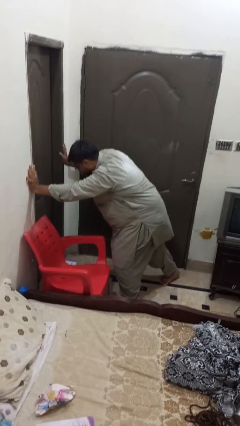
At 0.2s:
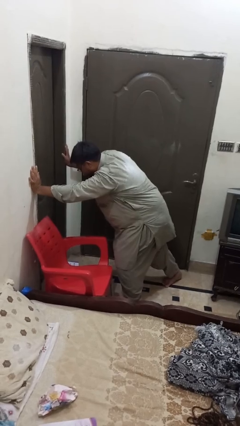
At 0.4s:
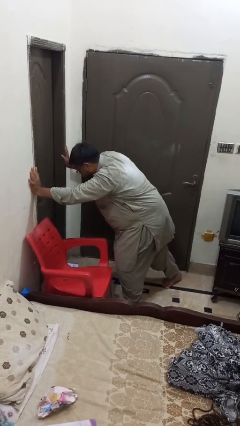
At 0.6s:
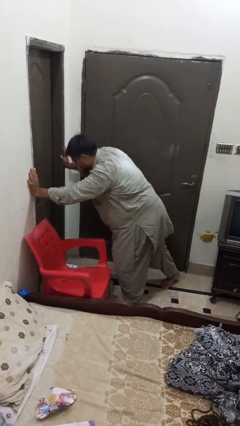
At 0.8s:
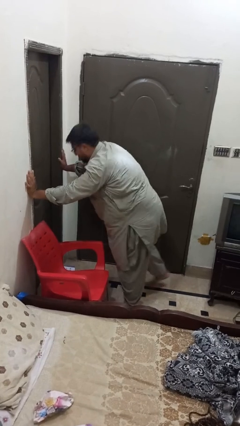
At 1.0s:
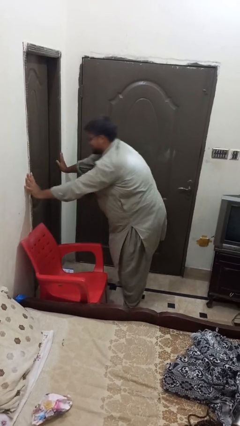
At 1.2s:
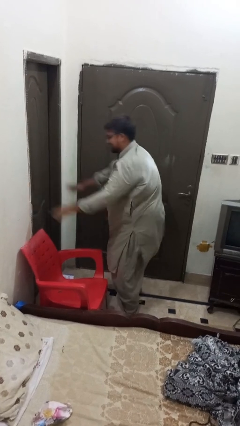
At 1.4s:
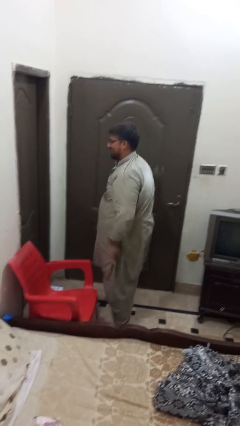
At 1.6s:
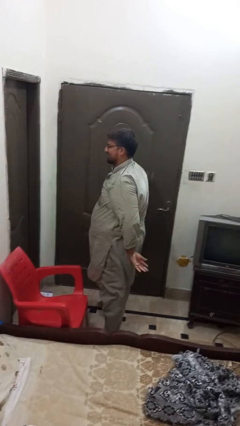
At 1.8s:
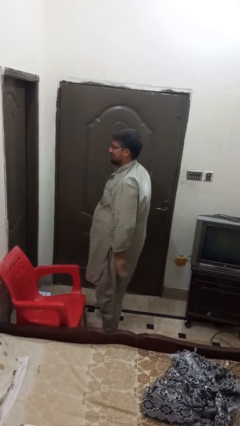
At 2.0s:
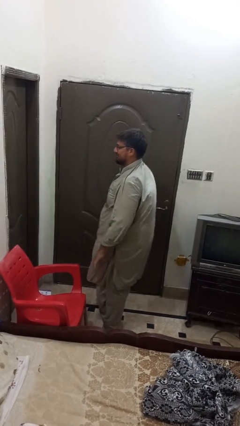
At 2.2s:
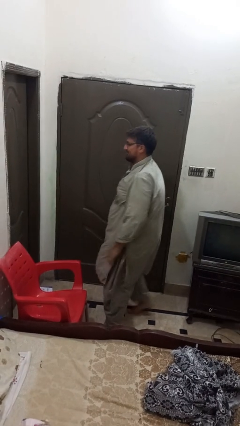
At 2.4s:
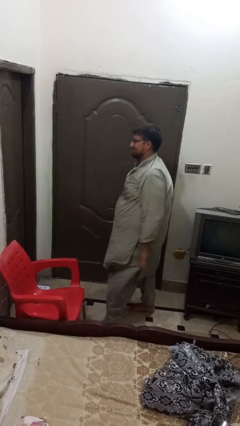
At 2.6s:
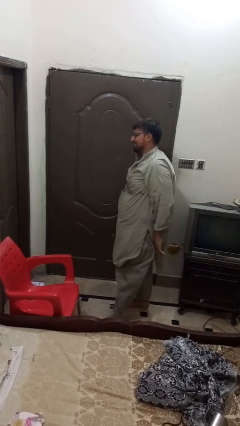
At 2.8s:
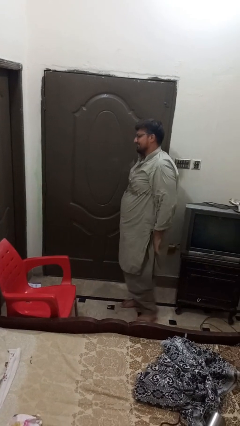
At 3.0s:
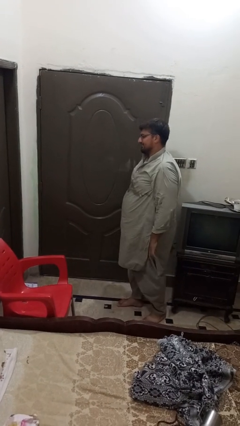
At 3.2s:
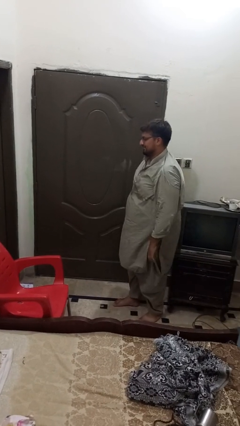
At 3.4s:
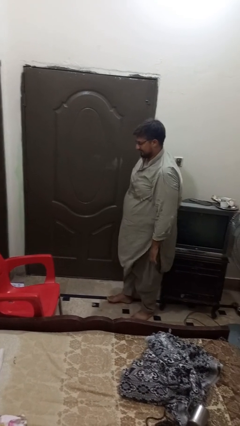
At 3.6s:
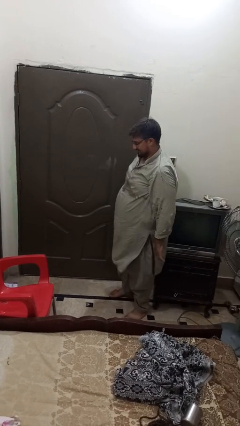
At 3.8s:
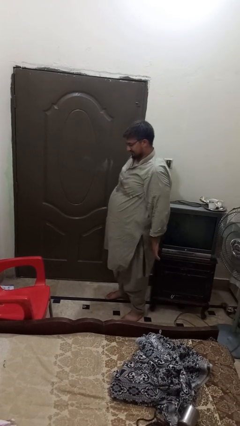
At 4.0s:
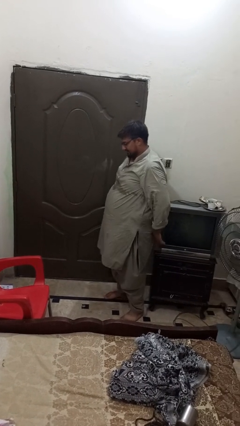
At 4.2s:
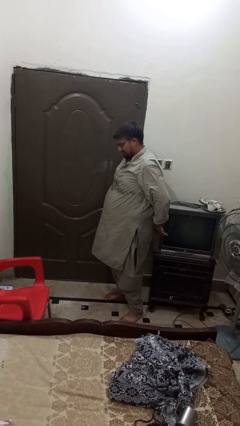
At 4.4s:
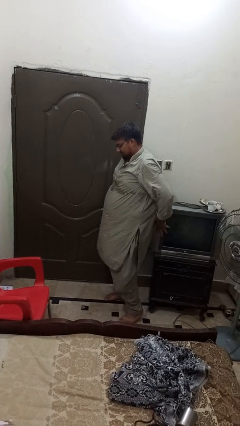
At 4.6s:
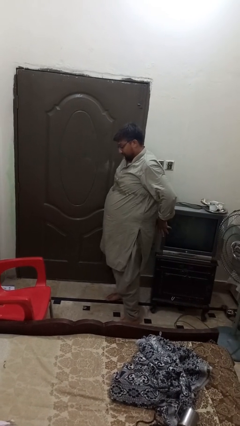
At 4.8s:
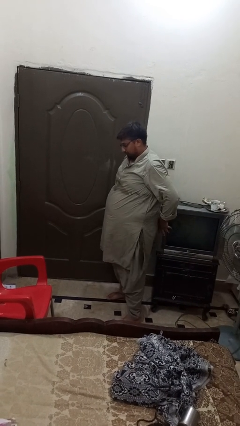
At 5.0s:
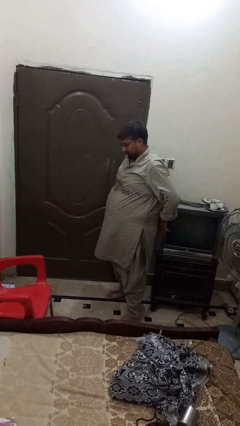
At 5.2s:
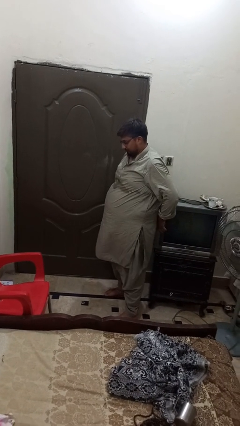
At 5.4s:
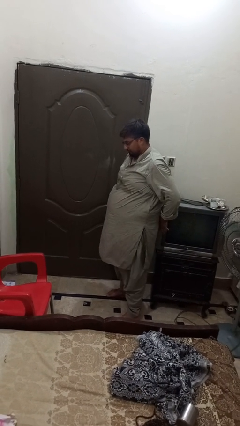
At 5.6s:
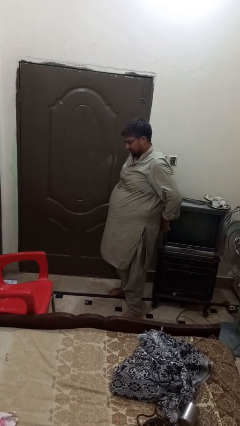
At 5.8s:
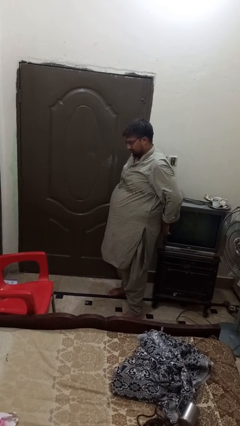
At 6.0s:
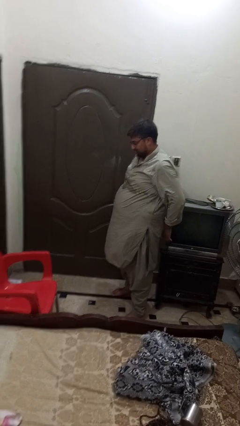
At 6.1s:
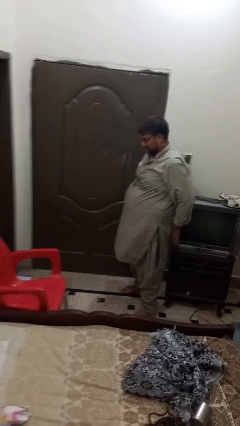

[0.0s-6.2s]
person stands up from floor

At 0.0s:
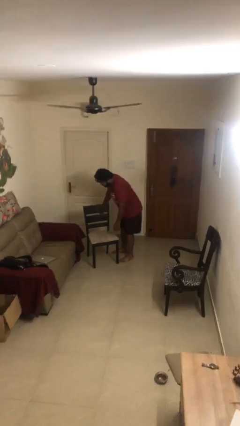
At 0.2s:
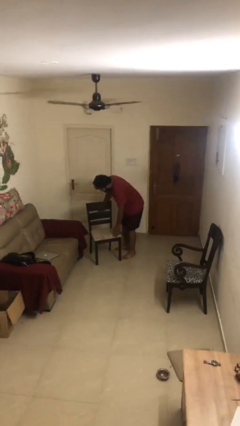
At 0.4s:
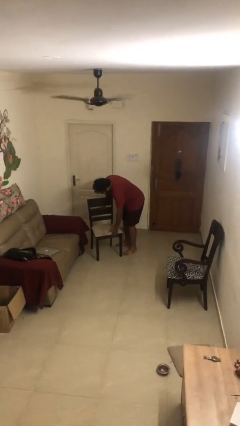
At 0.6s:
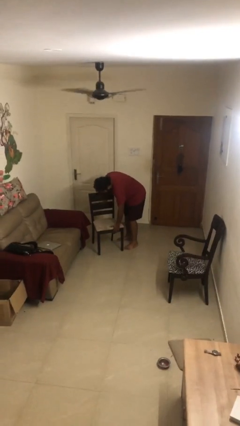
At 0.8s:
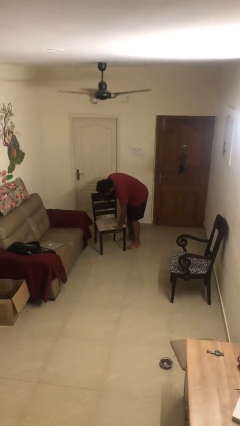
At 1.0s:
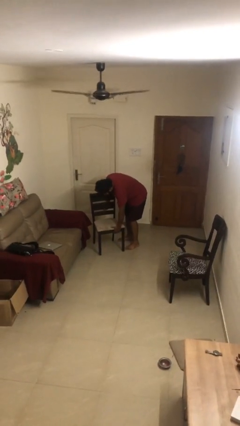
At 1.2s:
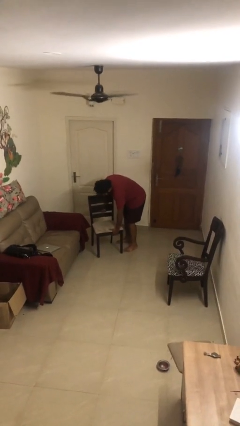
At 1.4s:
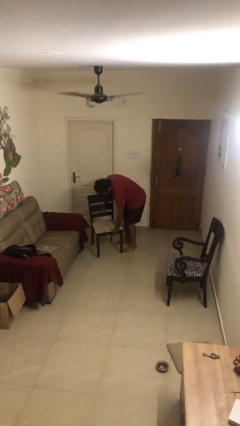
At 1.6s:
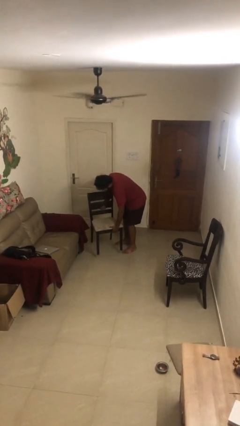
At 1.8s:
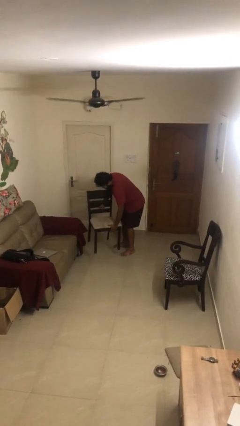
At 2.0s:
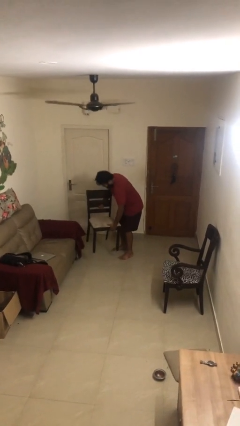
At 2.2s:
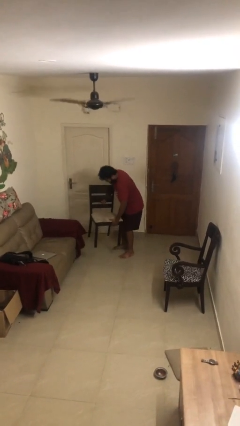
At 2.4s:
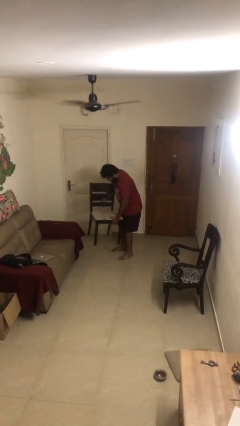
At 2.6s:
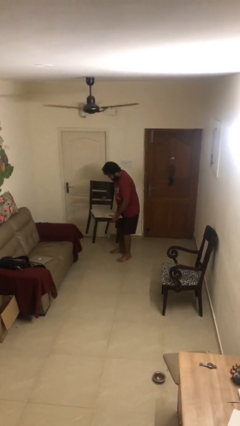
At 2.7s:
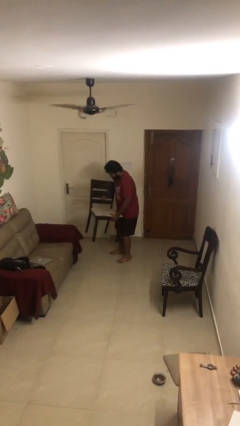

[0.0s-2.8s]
person picks up object from floor

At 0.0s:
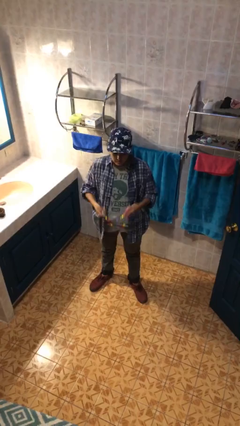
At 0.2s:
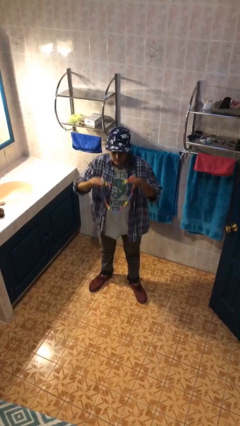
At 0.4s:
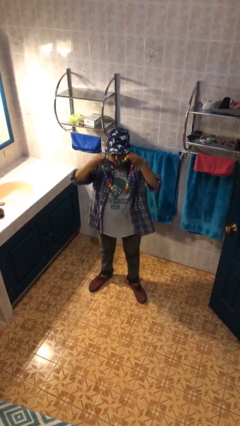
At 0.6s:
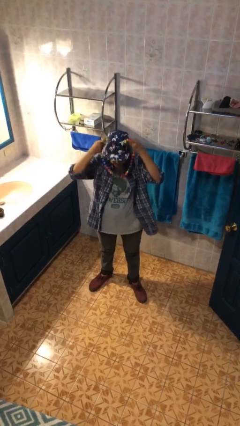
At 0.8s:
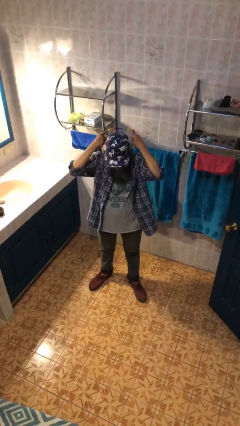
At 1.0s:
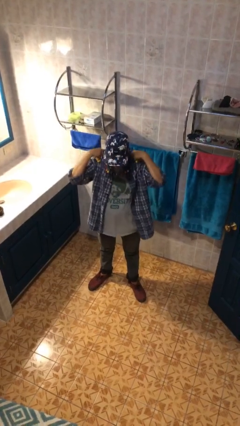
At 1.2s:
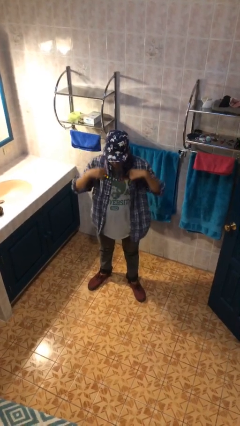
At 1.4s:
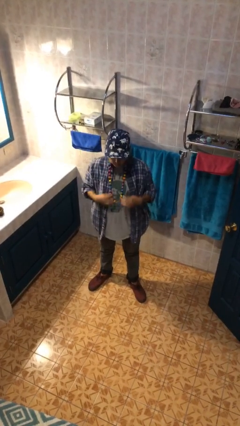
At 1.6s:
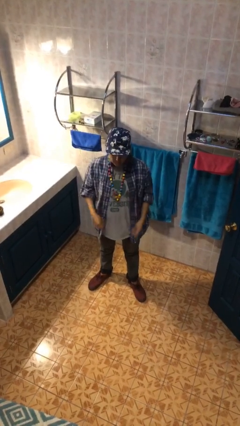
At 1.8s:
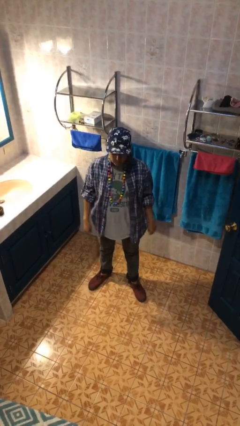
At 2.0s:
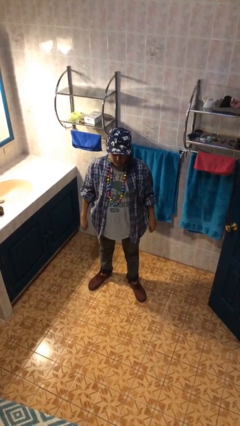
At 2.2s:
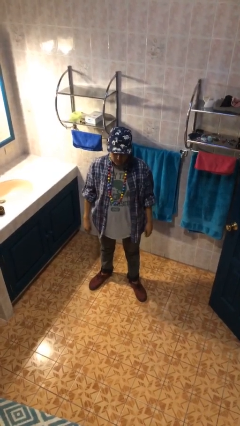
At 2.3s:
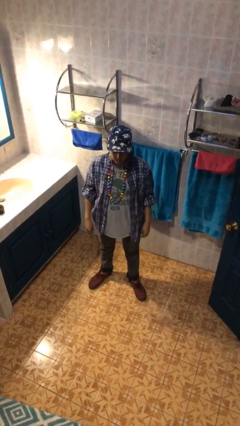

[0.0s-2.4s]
person puts on necklace

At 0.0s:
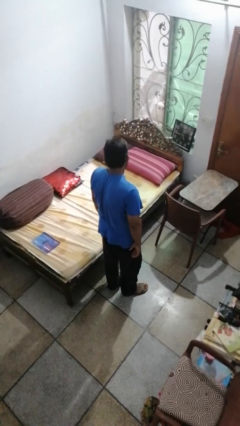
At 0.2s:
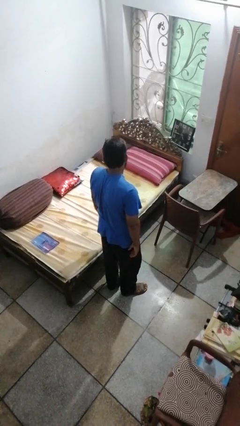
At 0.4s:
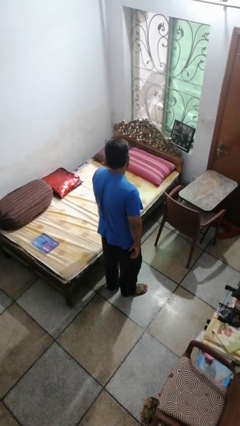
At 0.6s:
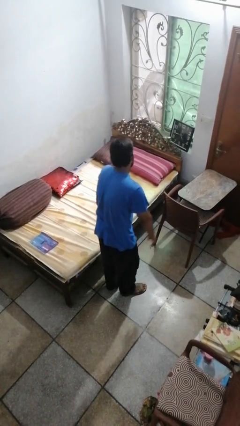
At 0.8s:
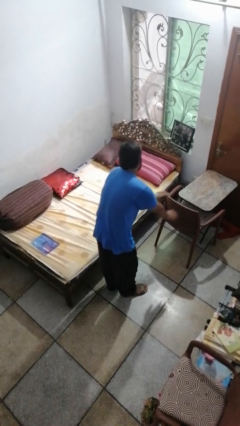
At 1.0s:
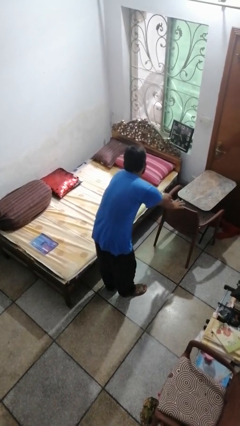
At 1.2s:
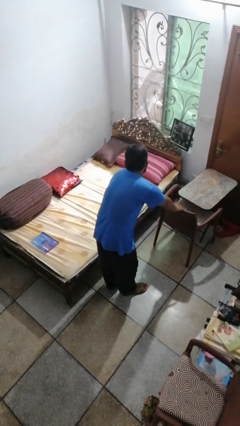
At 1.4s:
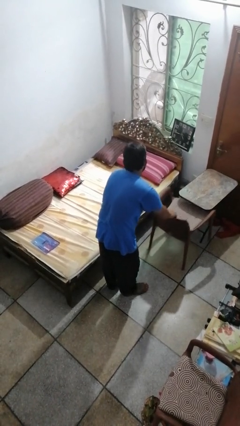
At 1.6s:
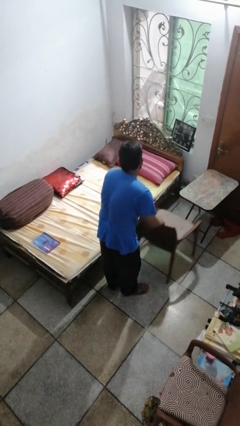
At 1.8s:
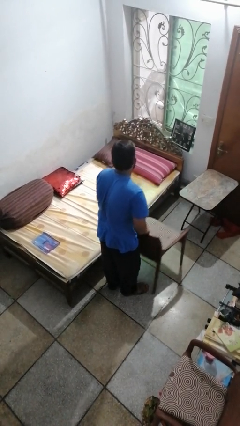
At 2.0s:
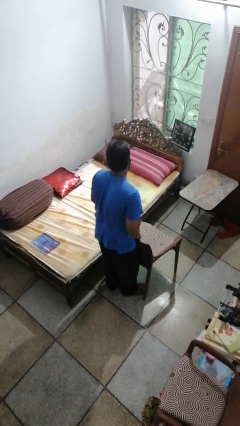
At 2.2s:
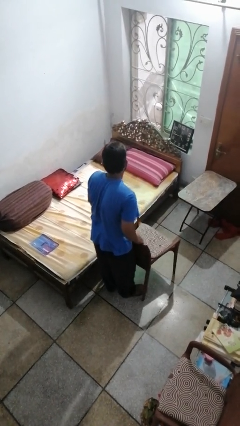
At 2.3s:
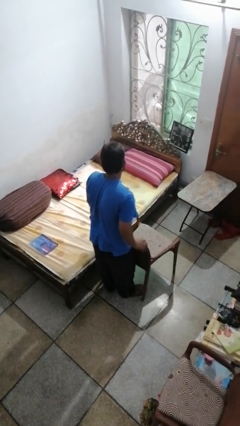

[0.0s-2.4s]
person pulls out chair

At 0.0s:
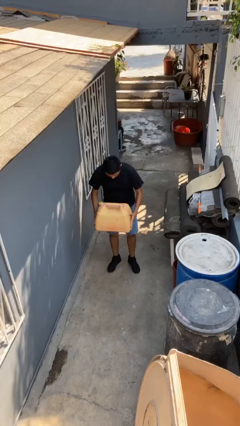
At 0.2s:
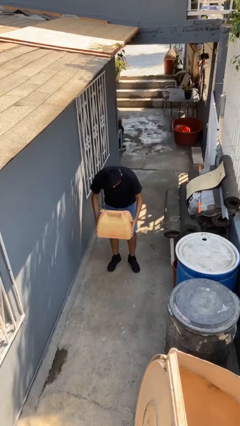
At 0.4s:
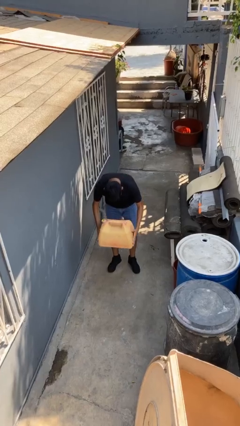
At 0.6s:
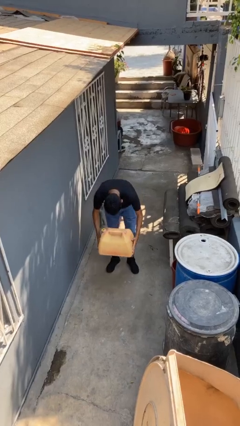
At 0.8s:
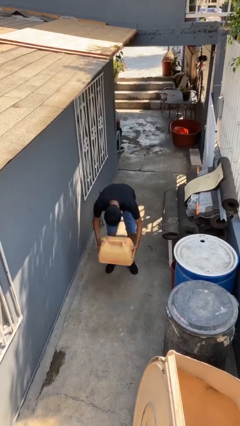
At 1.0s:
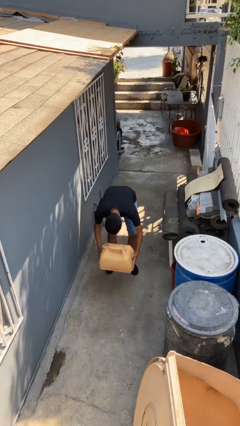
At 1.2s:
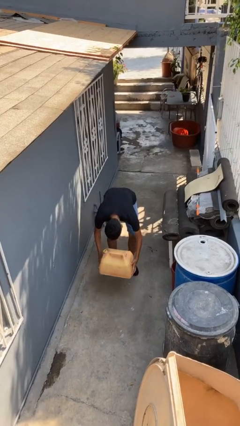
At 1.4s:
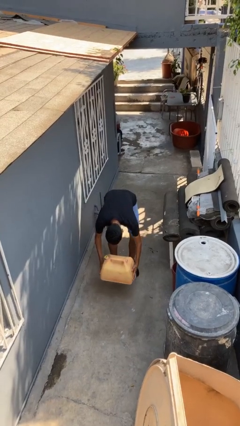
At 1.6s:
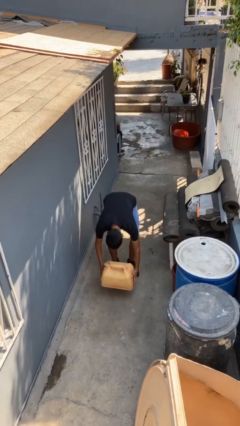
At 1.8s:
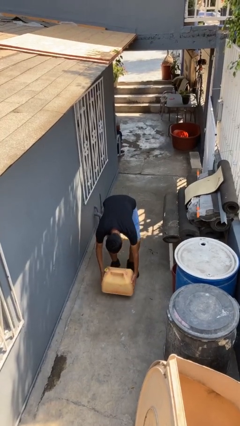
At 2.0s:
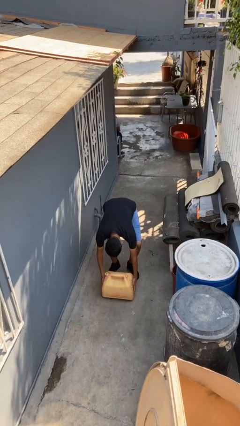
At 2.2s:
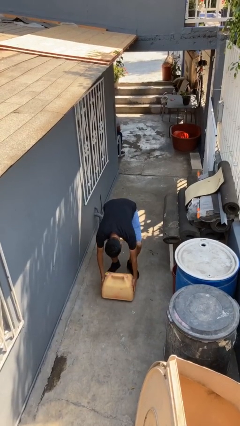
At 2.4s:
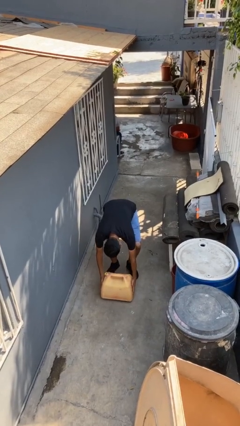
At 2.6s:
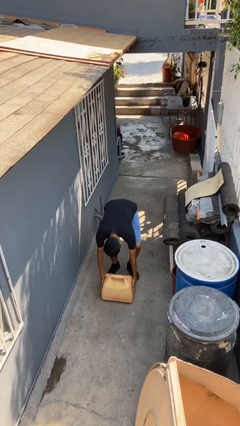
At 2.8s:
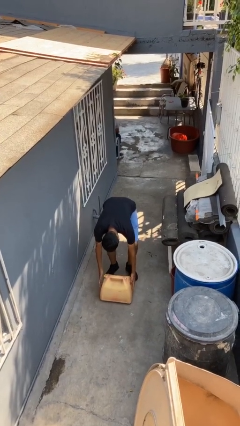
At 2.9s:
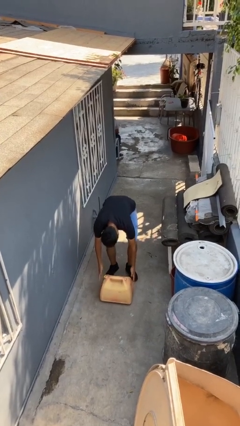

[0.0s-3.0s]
person puts down object on floor

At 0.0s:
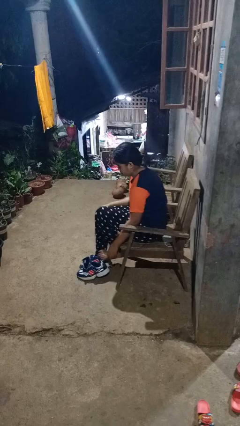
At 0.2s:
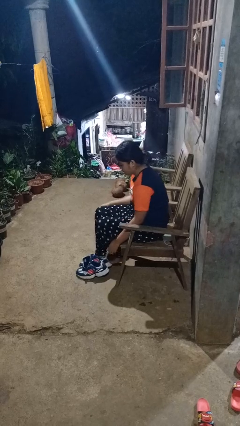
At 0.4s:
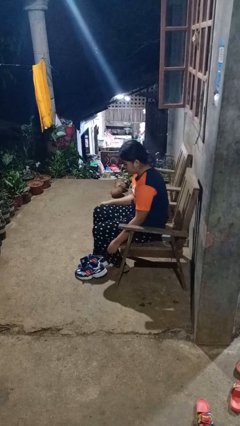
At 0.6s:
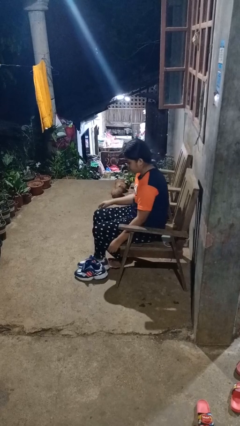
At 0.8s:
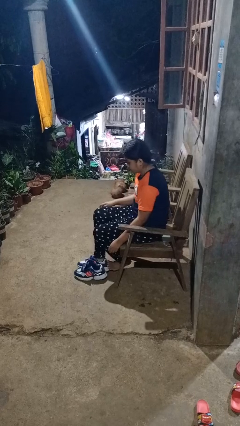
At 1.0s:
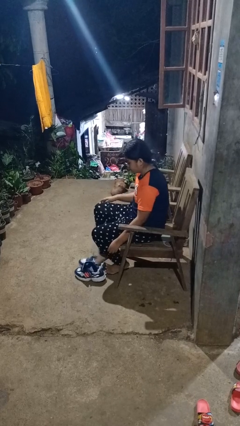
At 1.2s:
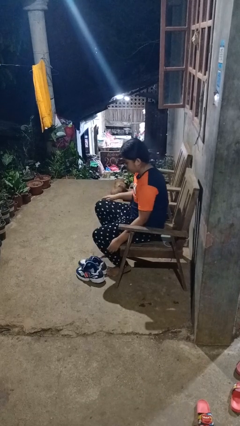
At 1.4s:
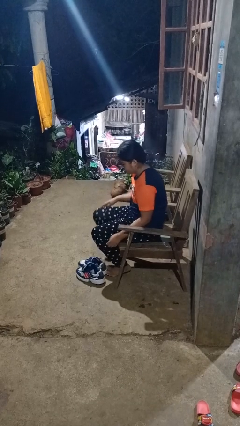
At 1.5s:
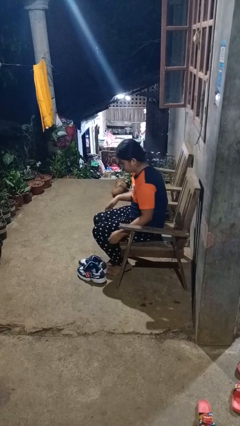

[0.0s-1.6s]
person takes off shoes
